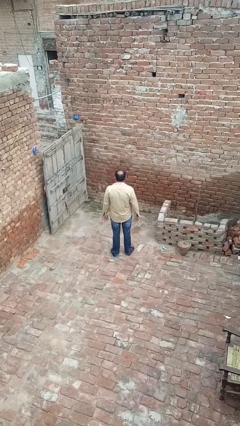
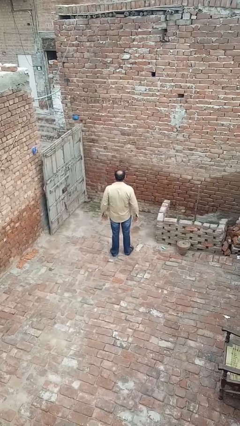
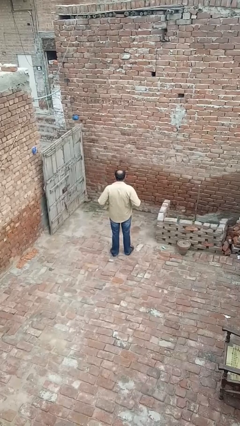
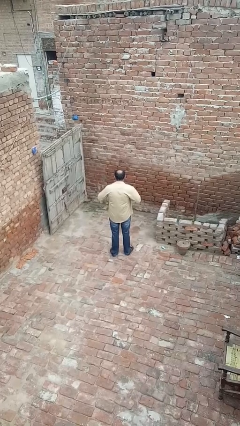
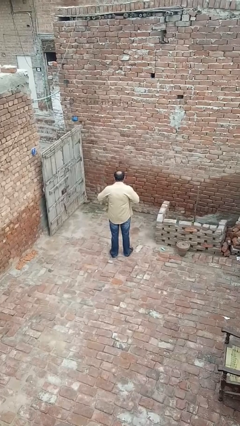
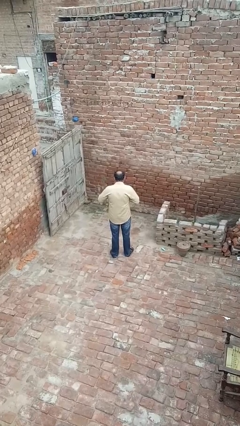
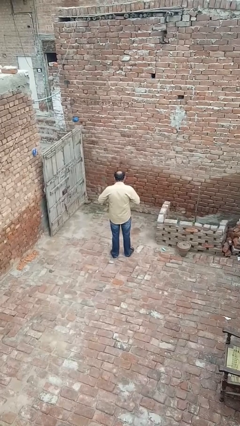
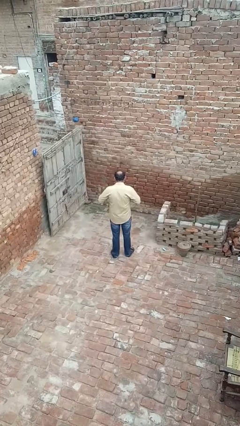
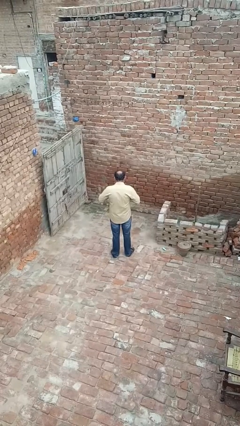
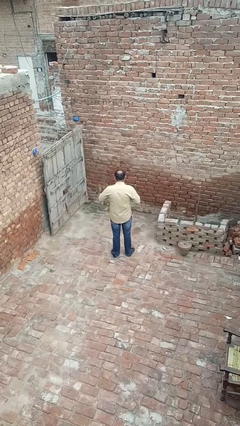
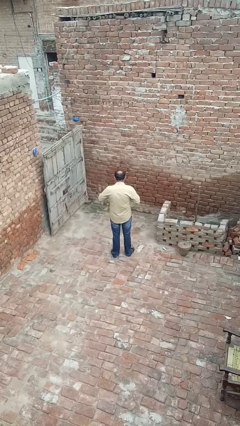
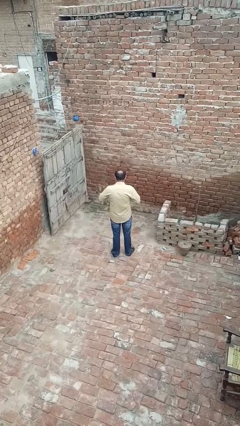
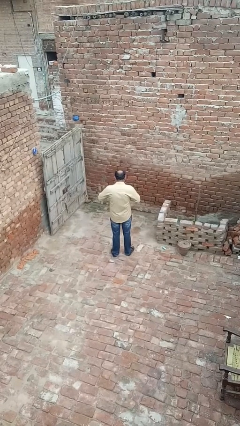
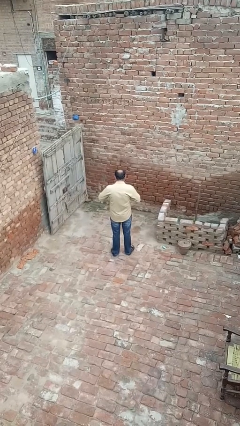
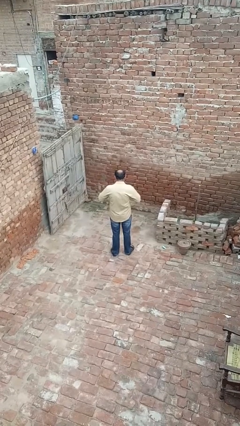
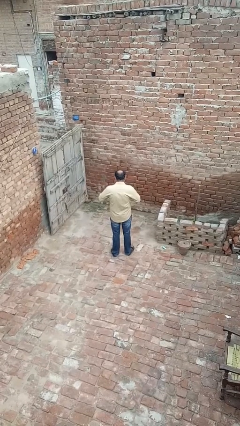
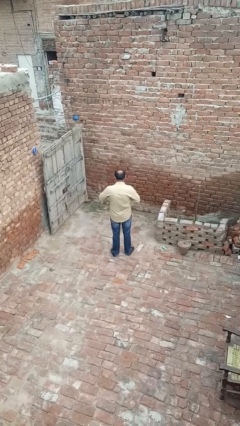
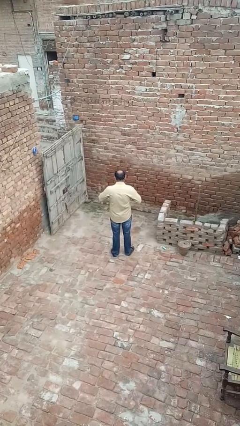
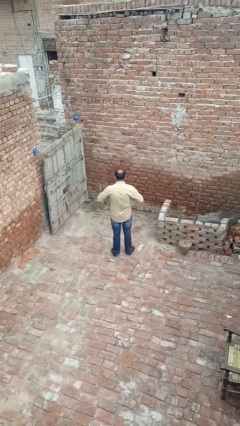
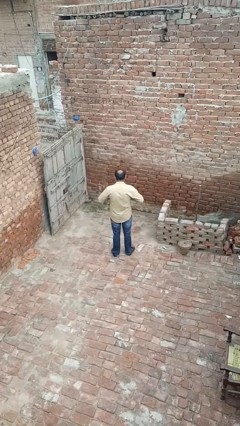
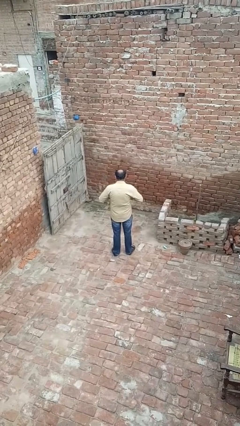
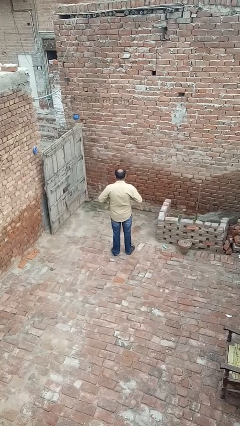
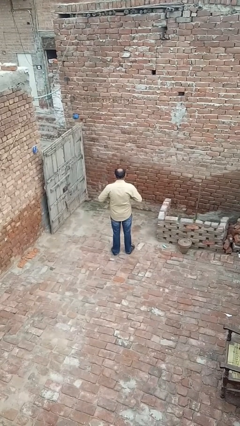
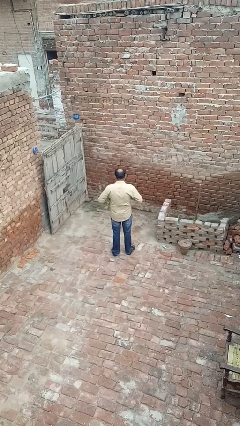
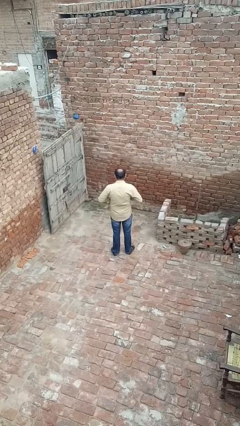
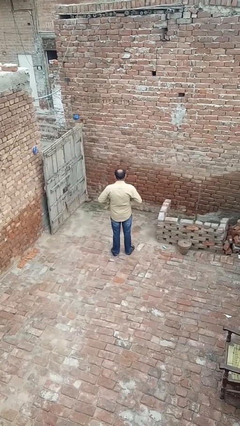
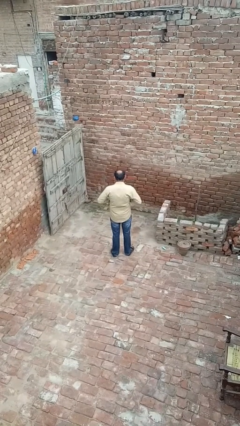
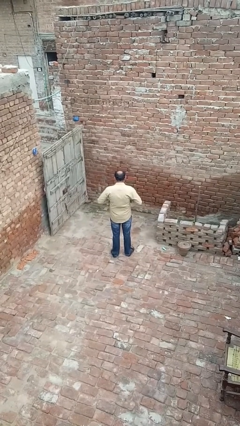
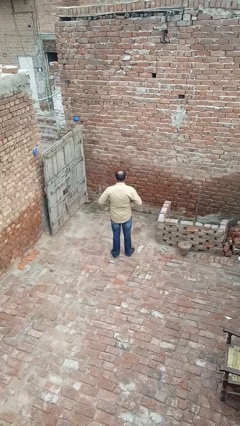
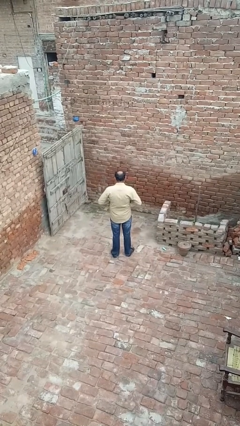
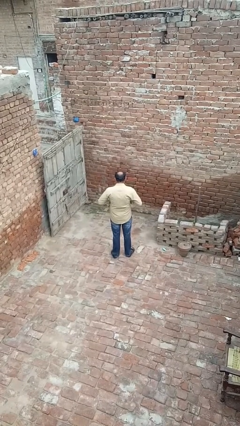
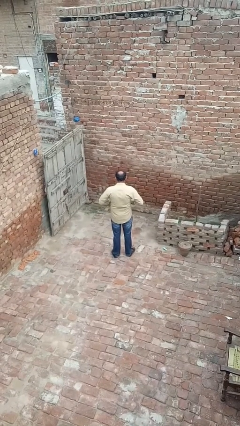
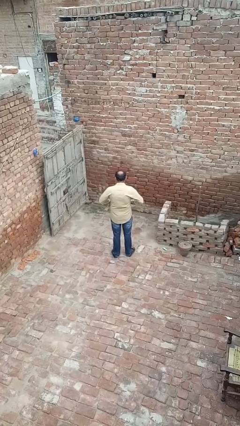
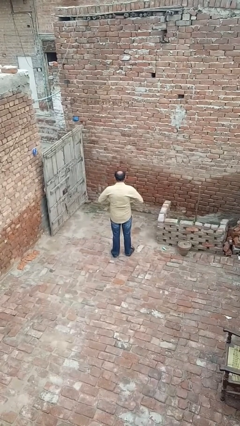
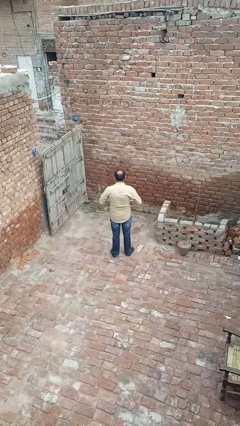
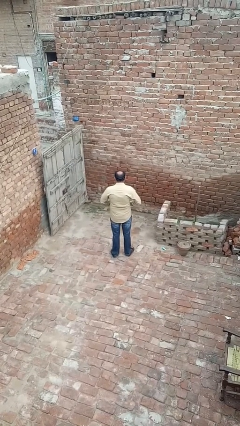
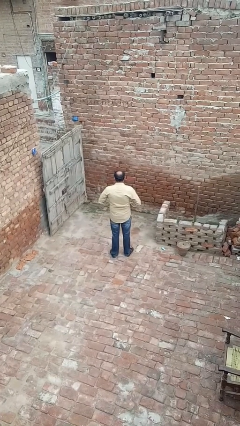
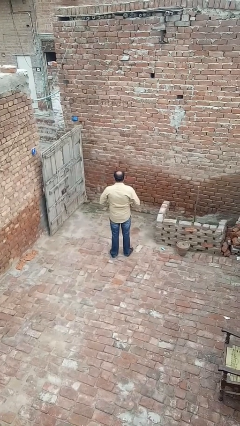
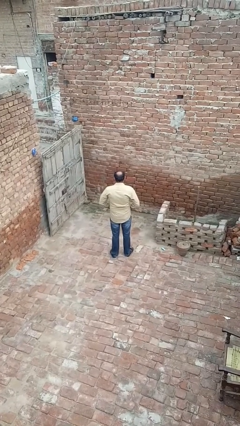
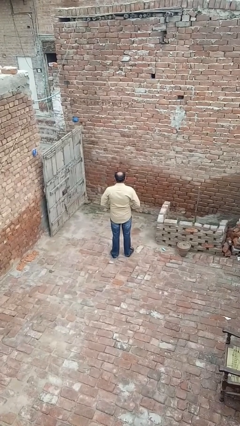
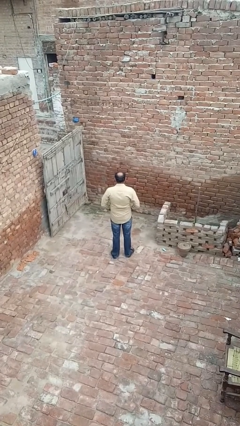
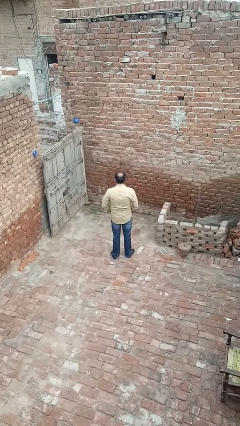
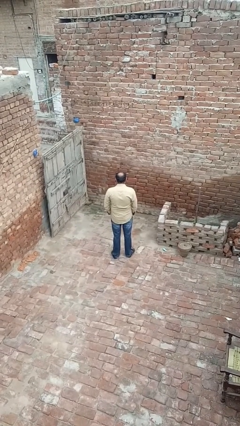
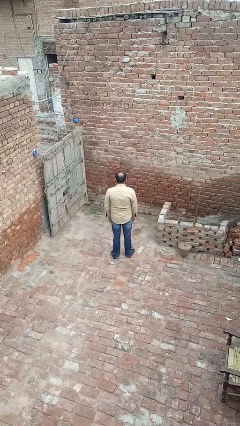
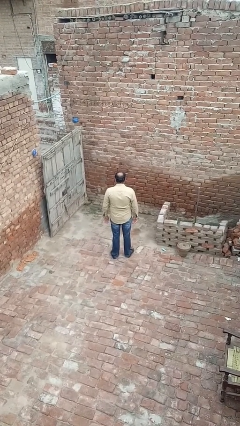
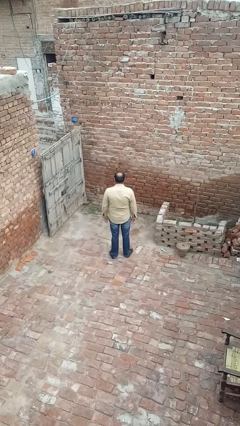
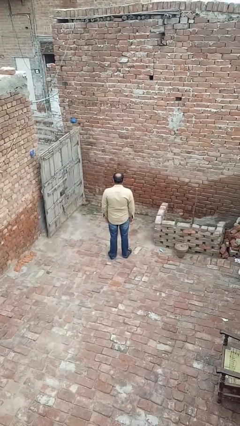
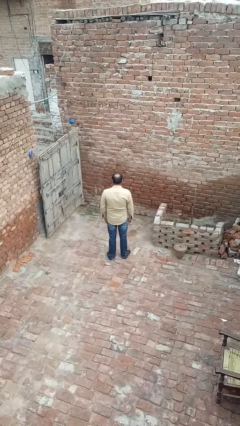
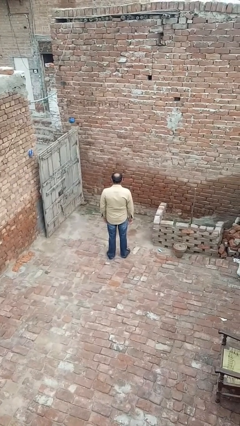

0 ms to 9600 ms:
person buttons shirt

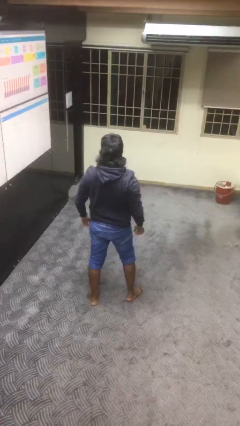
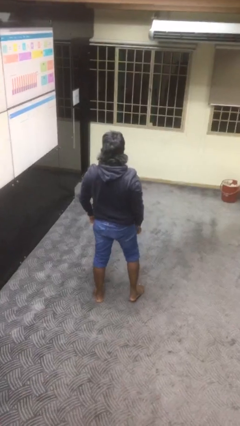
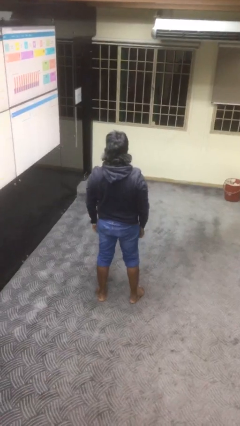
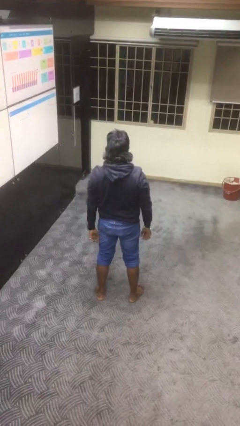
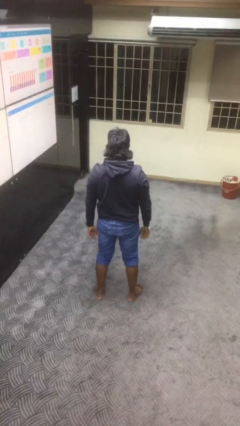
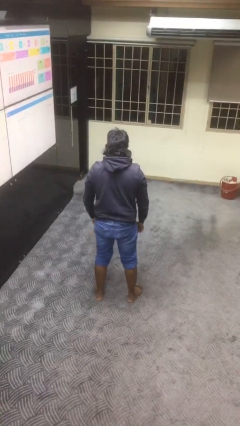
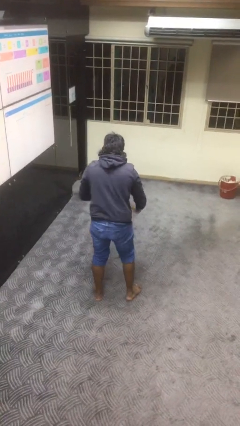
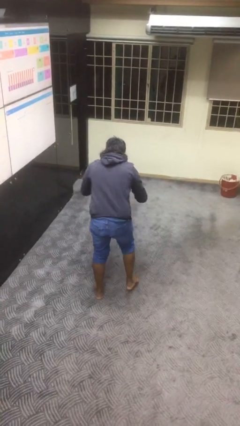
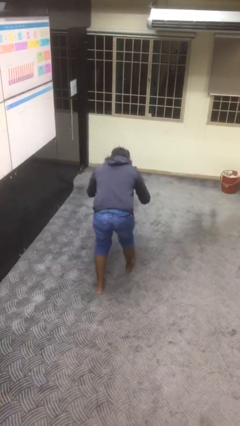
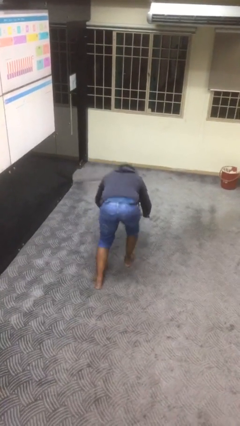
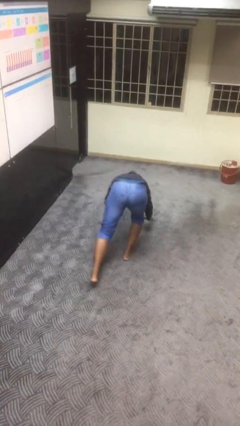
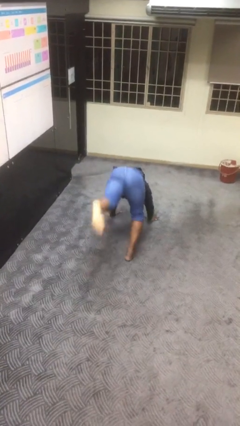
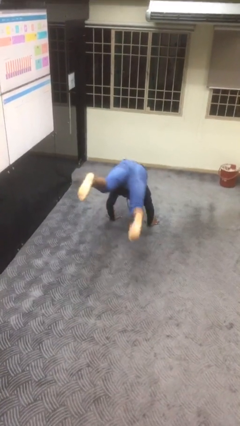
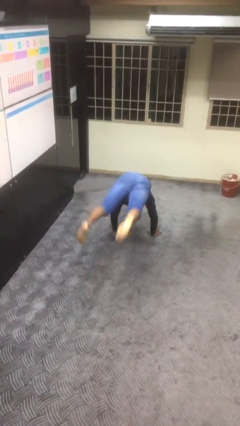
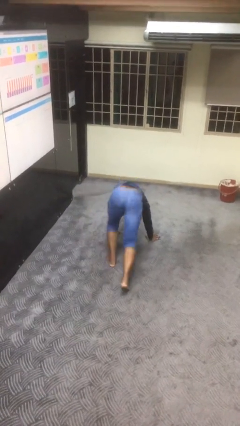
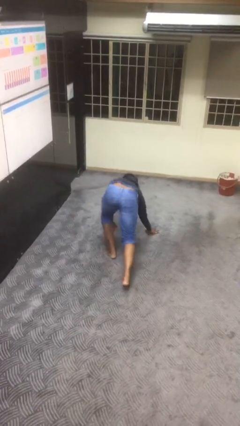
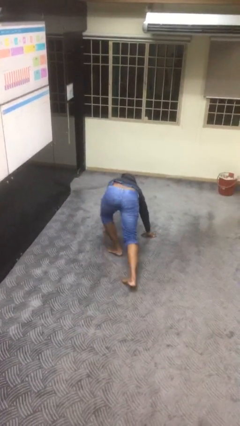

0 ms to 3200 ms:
person handstand

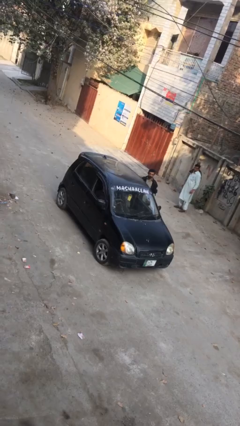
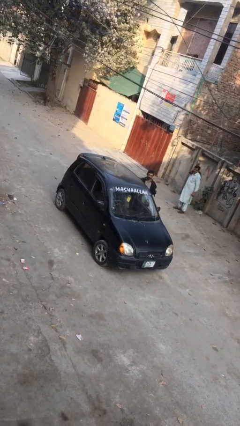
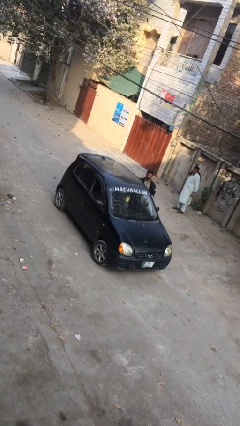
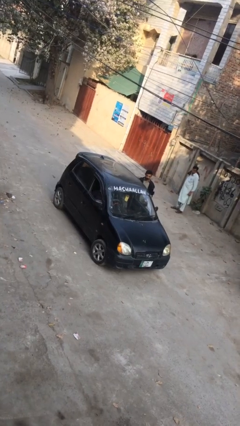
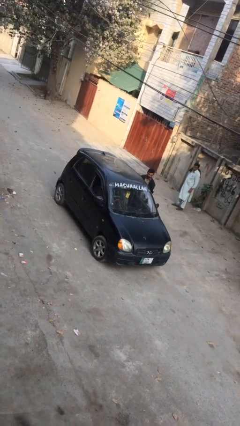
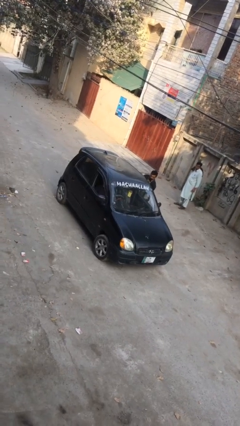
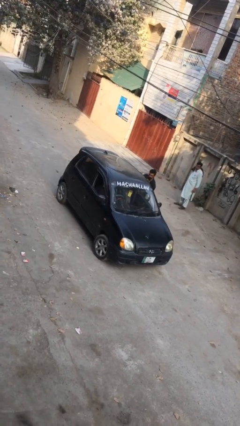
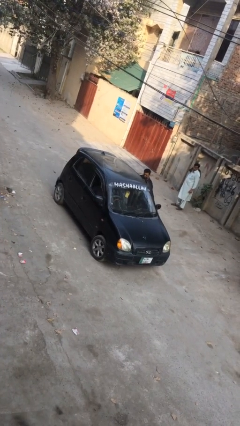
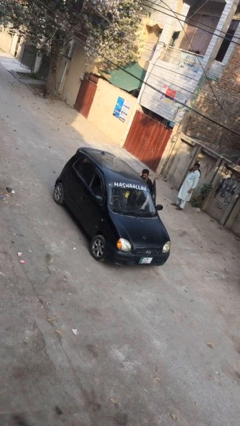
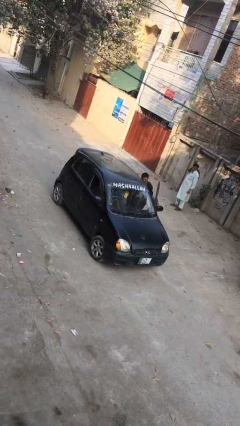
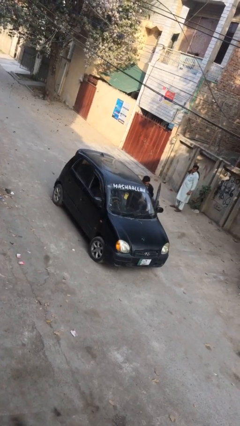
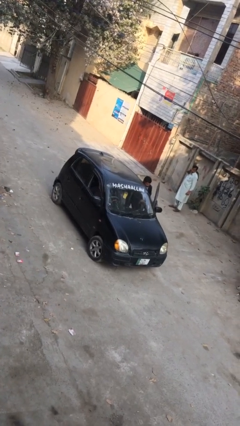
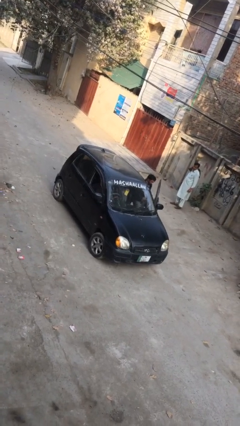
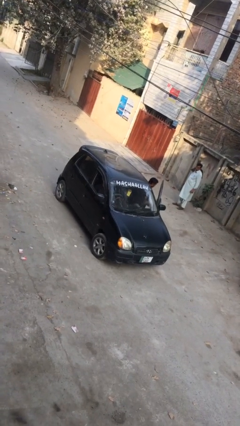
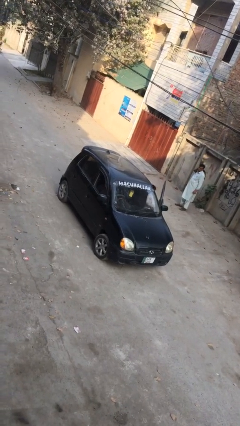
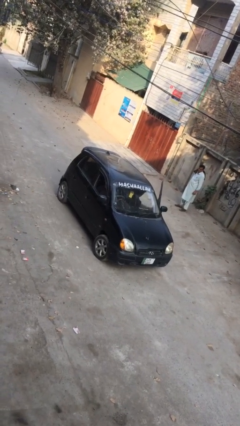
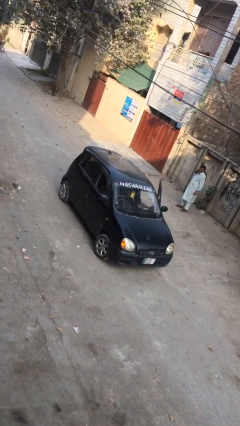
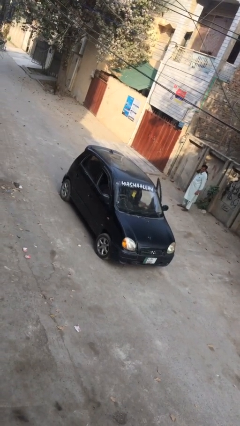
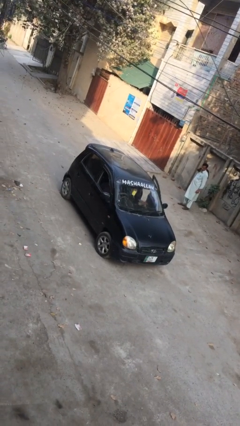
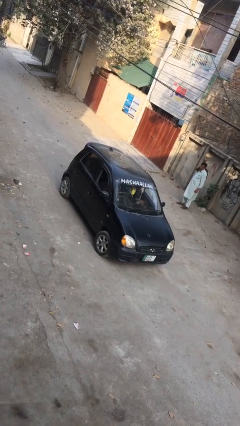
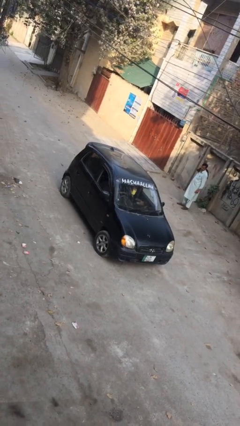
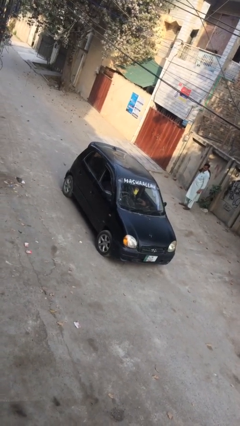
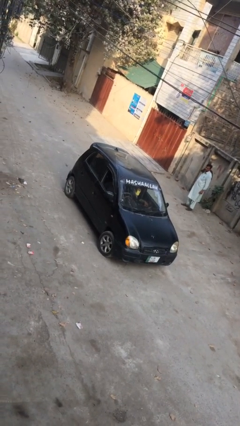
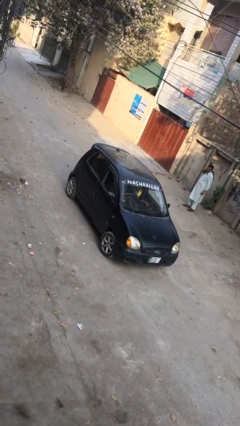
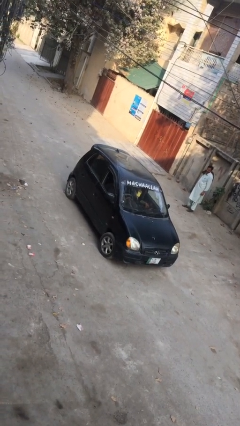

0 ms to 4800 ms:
car picks up person

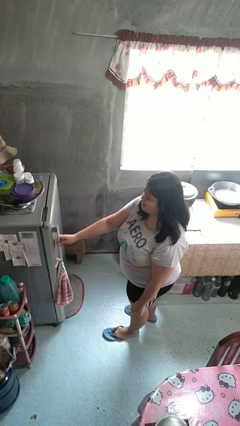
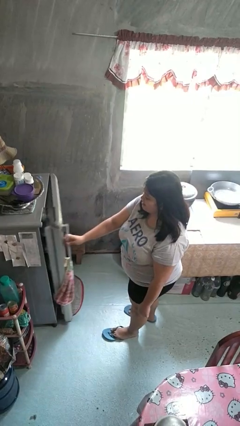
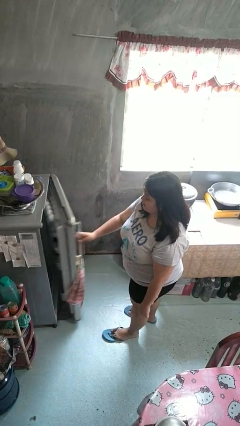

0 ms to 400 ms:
person opens refrigerator
